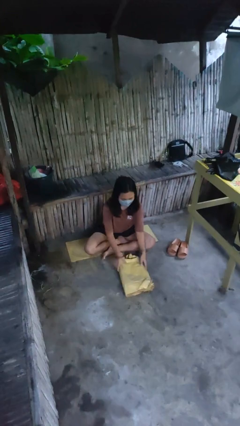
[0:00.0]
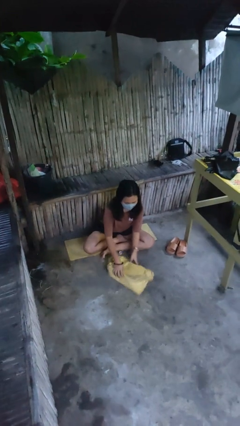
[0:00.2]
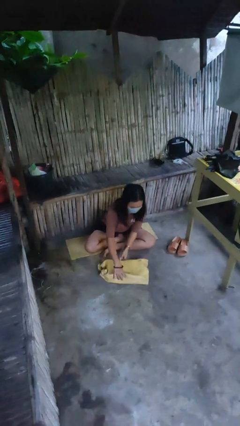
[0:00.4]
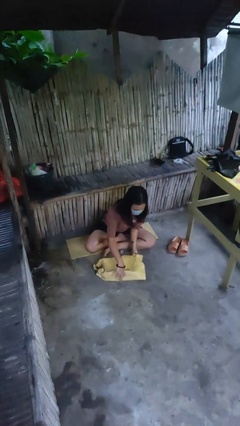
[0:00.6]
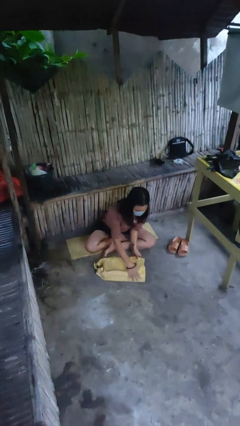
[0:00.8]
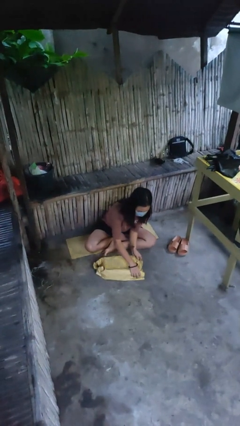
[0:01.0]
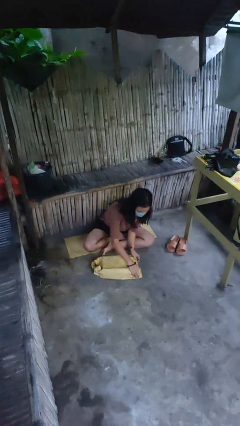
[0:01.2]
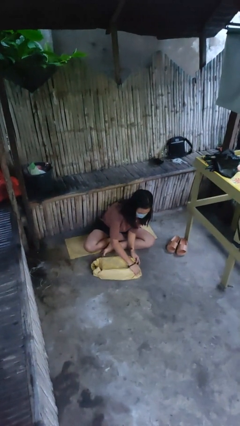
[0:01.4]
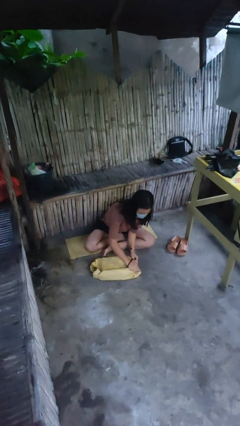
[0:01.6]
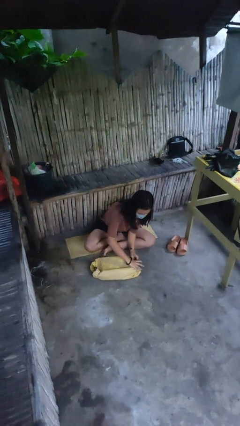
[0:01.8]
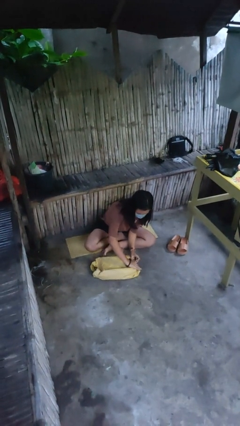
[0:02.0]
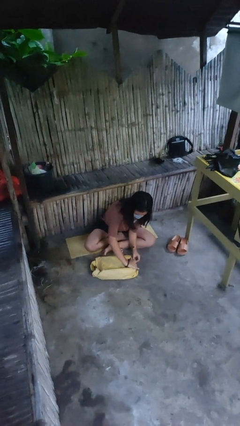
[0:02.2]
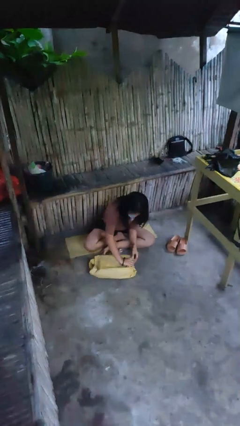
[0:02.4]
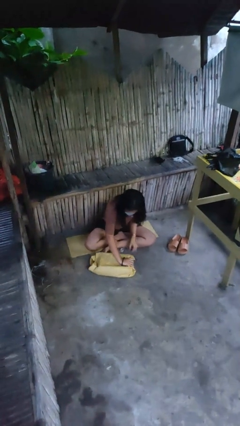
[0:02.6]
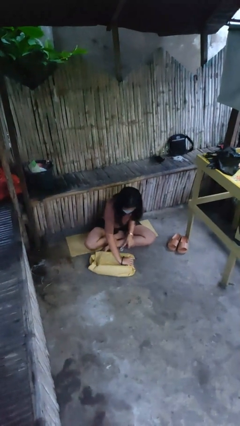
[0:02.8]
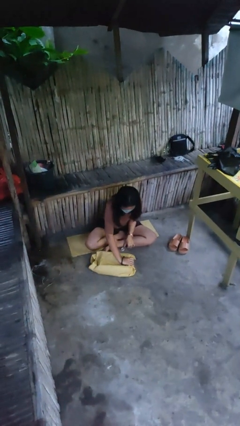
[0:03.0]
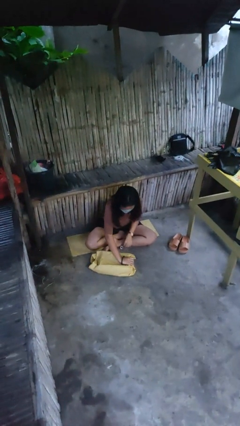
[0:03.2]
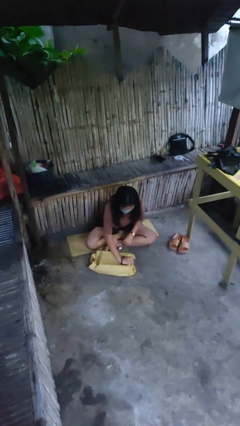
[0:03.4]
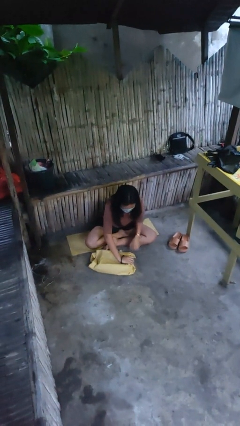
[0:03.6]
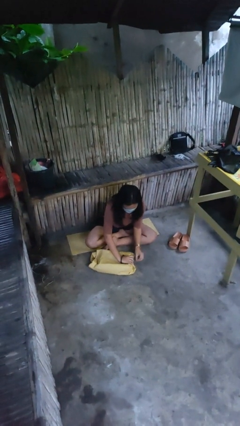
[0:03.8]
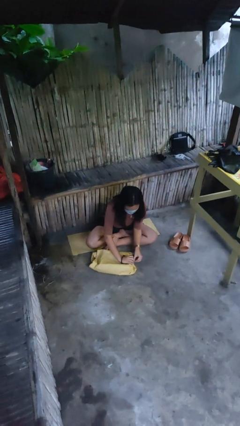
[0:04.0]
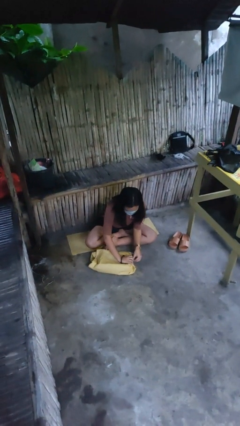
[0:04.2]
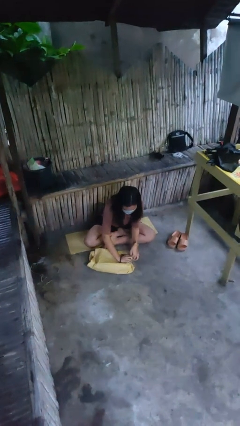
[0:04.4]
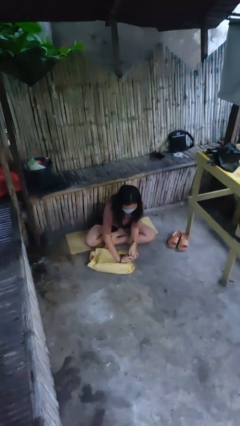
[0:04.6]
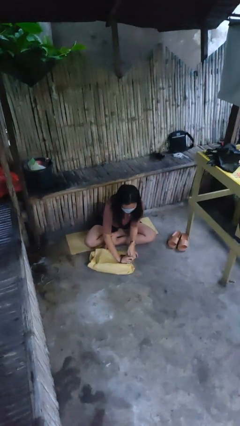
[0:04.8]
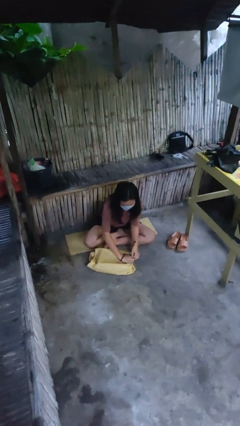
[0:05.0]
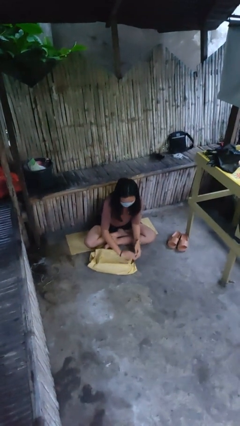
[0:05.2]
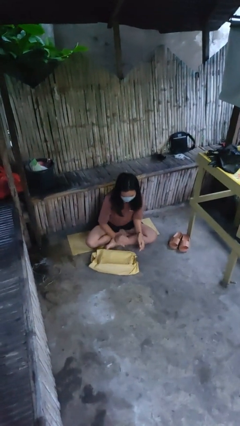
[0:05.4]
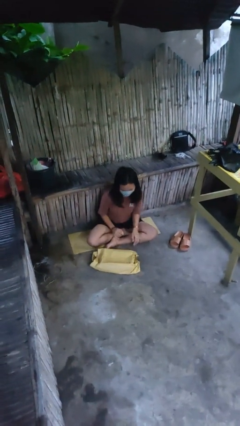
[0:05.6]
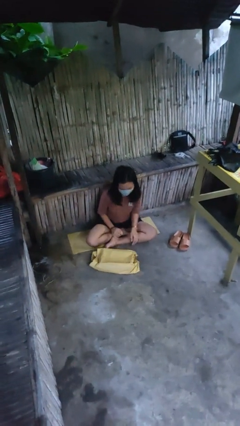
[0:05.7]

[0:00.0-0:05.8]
person wraps box

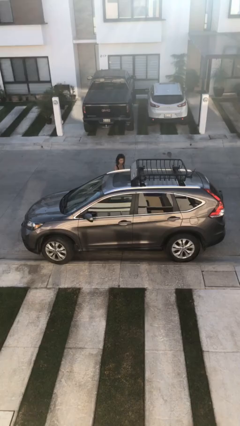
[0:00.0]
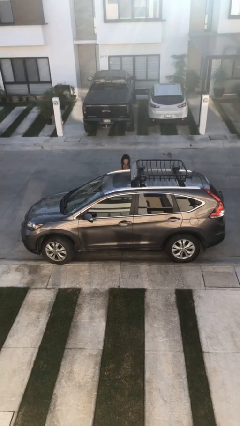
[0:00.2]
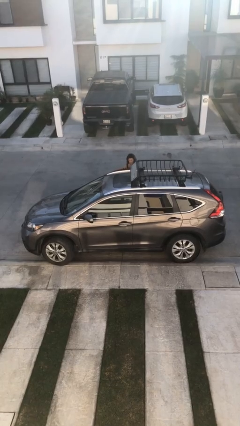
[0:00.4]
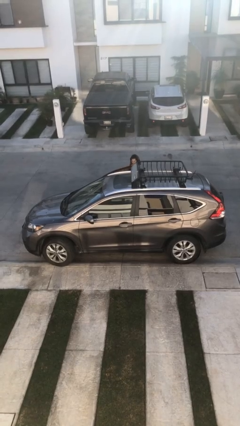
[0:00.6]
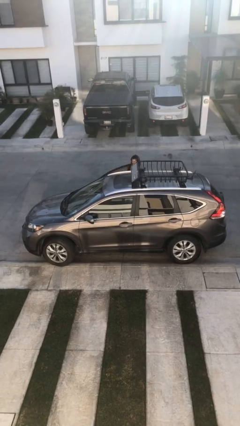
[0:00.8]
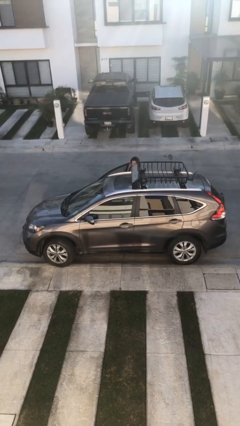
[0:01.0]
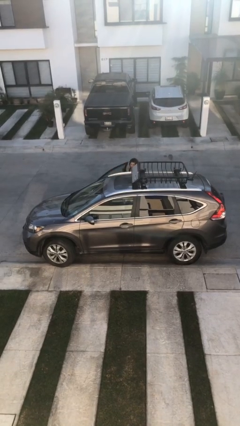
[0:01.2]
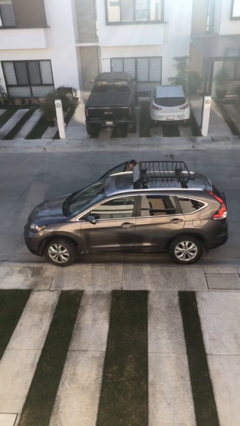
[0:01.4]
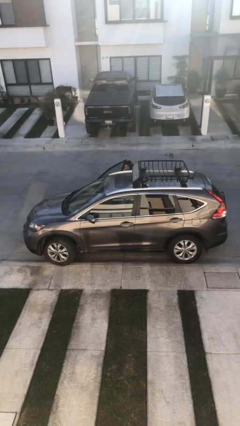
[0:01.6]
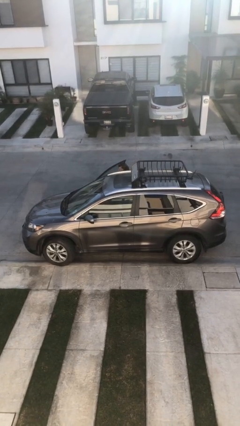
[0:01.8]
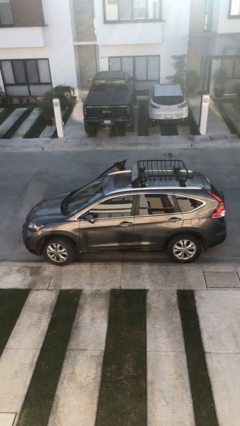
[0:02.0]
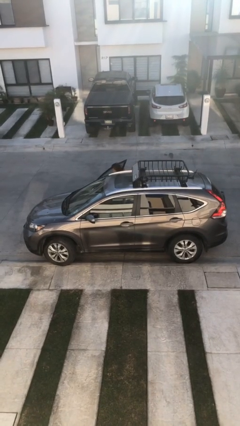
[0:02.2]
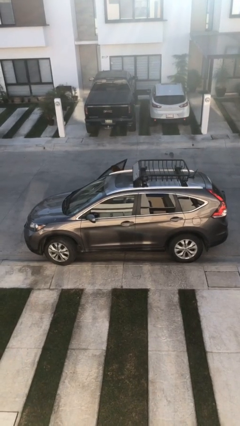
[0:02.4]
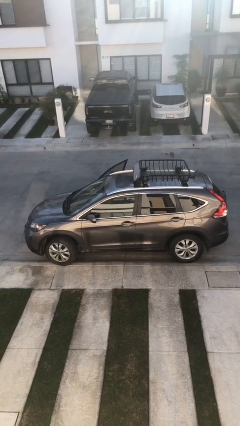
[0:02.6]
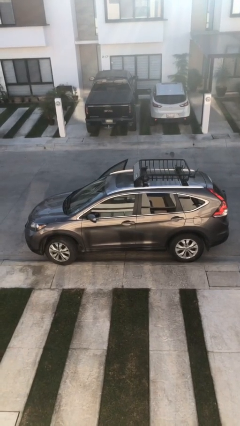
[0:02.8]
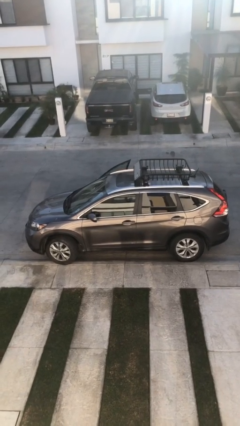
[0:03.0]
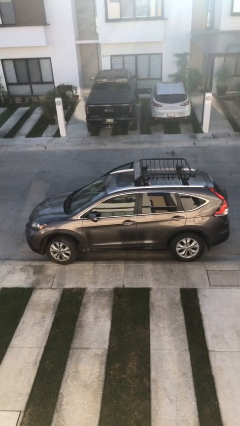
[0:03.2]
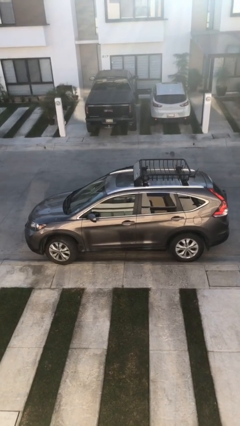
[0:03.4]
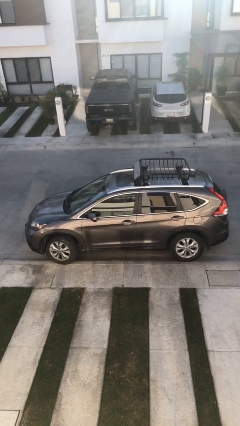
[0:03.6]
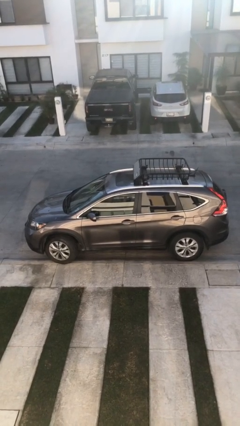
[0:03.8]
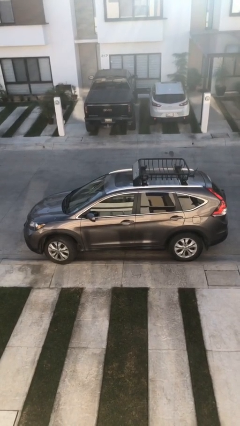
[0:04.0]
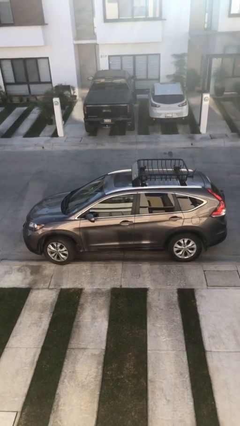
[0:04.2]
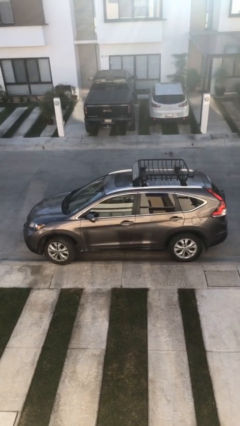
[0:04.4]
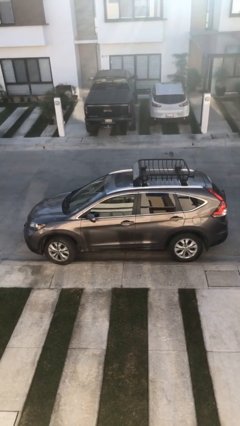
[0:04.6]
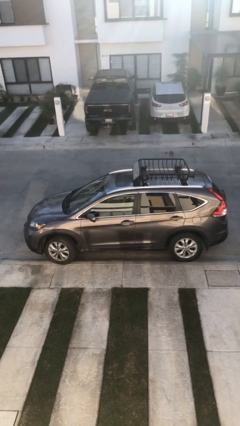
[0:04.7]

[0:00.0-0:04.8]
car picks up person

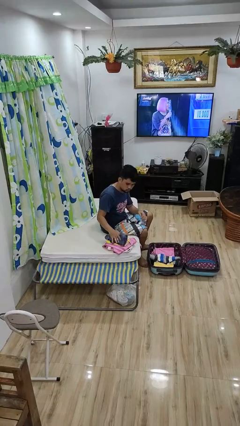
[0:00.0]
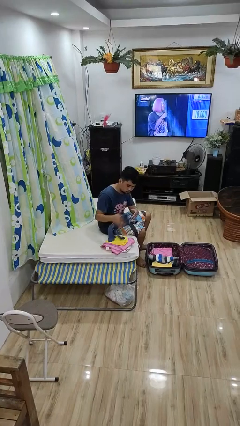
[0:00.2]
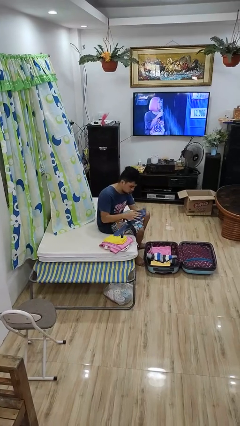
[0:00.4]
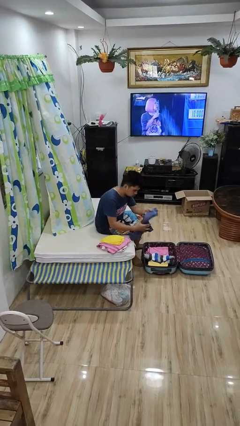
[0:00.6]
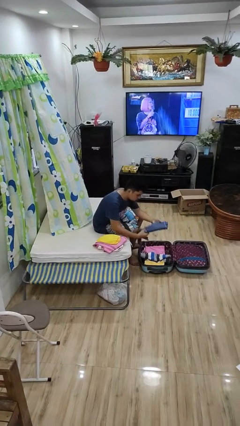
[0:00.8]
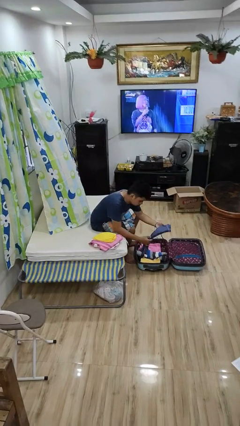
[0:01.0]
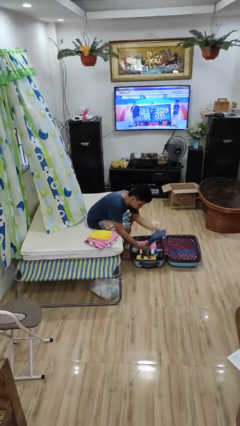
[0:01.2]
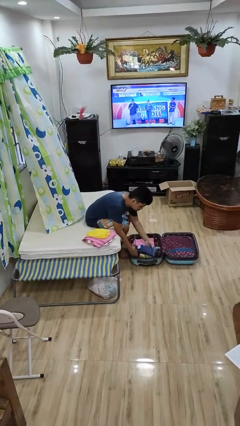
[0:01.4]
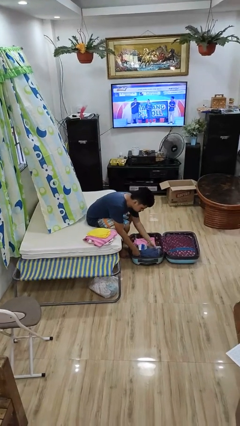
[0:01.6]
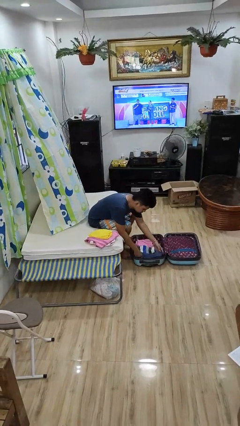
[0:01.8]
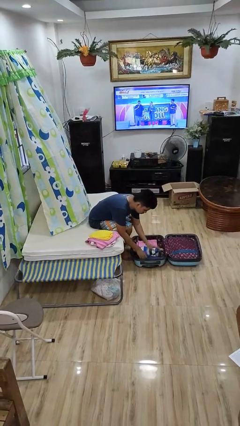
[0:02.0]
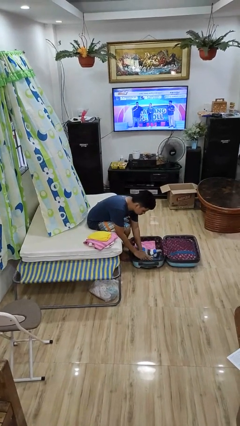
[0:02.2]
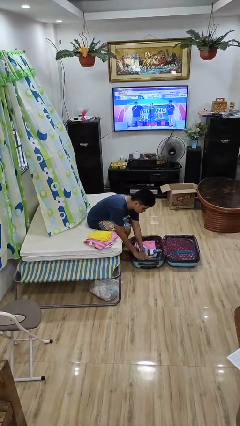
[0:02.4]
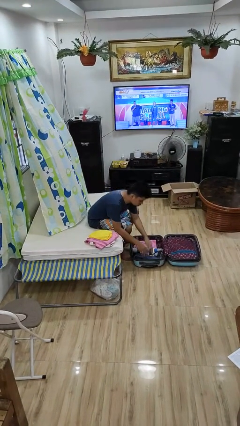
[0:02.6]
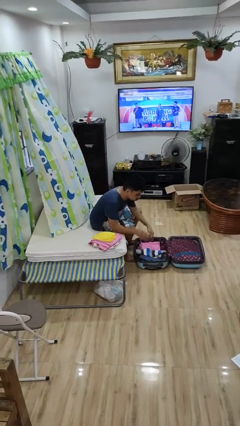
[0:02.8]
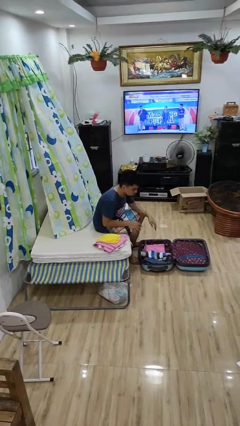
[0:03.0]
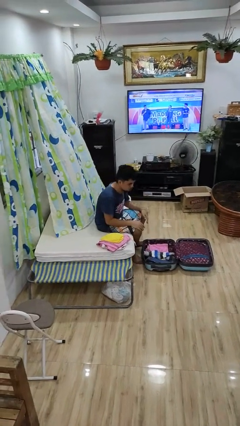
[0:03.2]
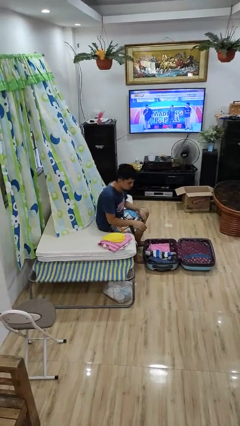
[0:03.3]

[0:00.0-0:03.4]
person loads clothes into suitcase

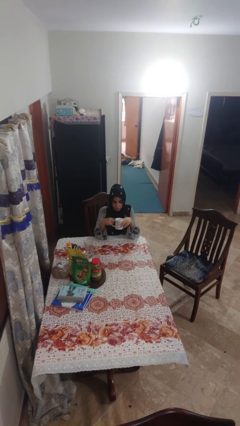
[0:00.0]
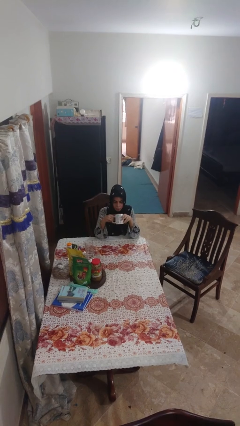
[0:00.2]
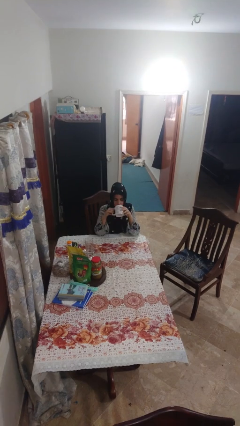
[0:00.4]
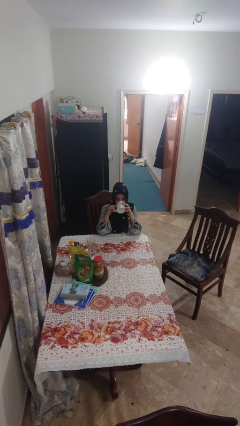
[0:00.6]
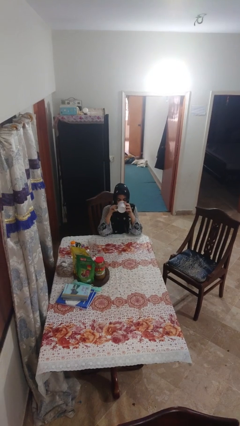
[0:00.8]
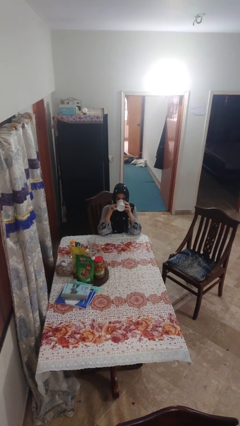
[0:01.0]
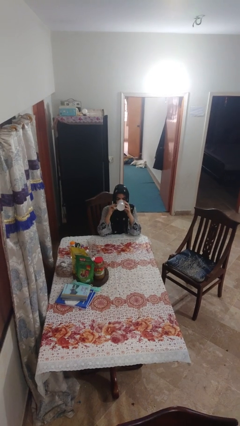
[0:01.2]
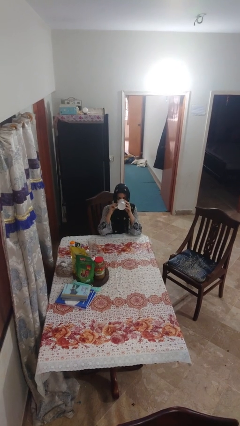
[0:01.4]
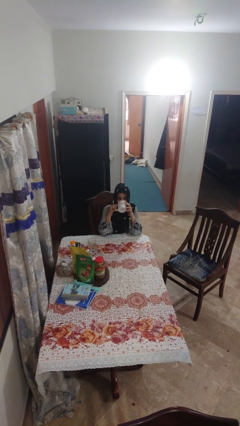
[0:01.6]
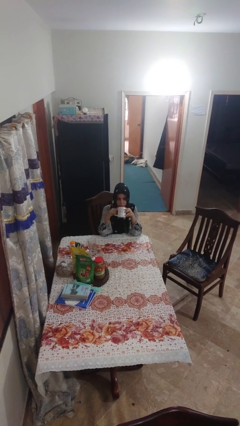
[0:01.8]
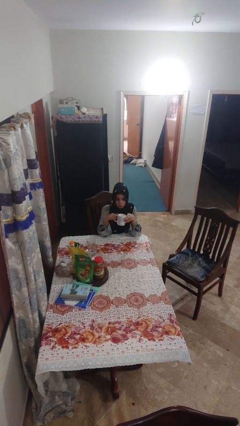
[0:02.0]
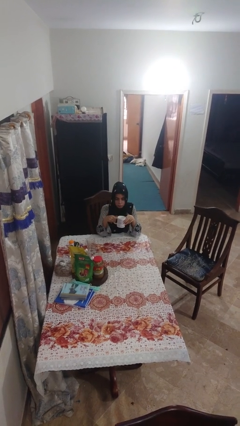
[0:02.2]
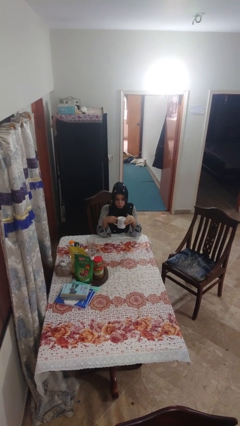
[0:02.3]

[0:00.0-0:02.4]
person drinks from mug

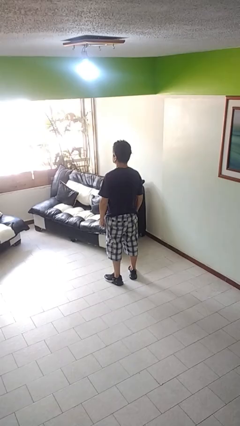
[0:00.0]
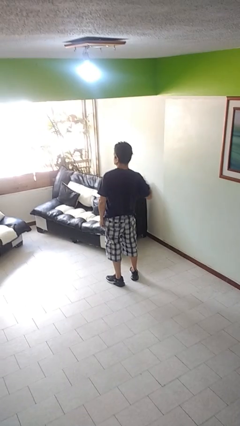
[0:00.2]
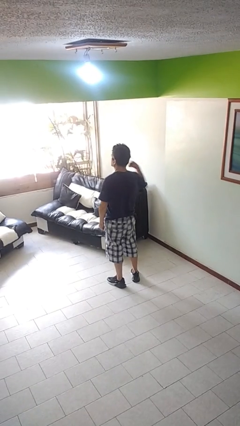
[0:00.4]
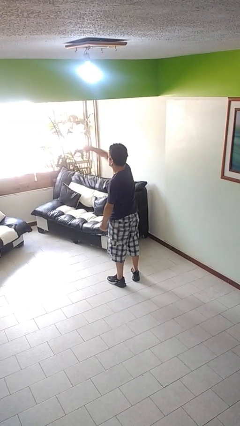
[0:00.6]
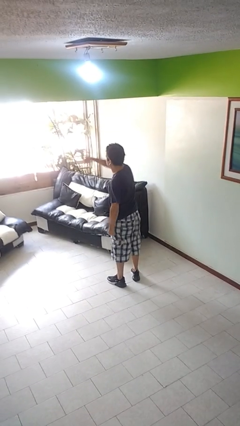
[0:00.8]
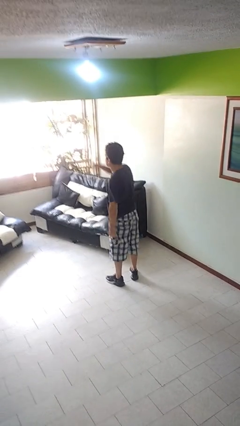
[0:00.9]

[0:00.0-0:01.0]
person punches

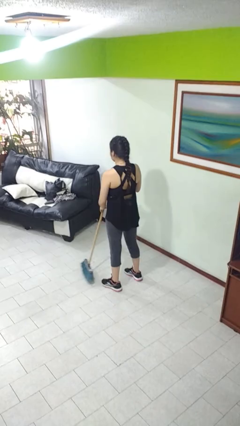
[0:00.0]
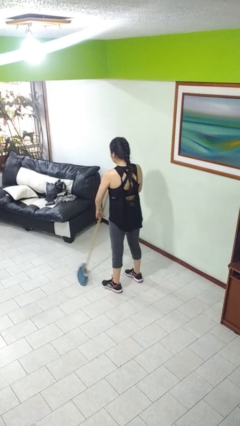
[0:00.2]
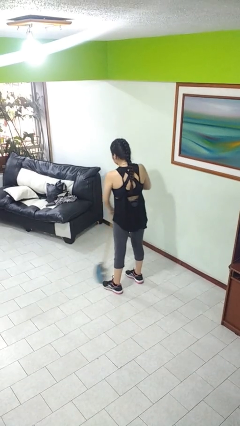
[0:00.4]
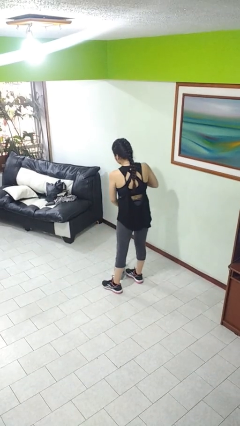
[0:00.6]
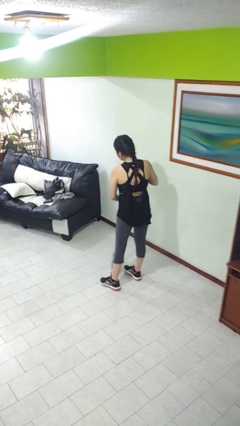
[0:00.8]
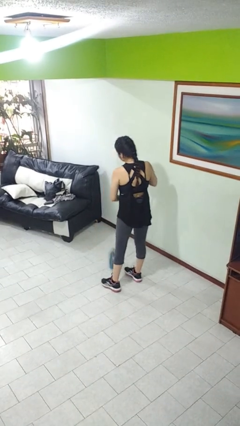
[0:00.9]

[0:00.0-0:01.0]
person sweeps floor
